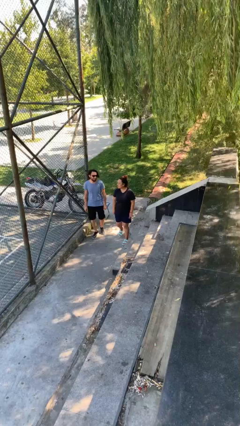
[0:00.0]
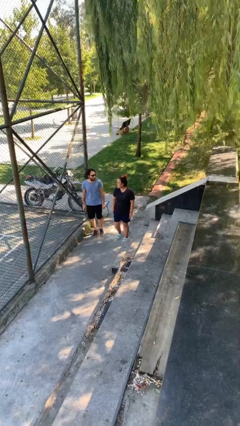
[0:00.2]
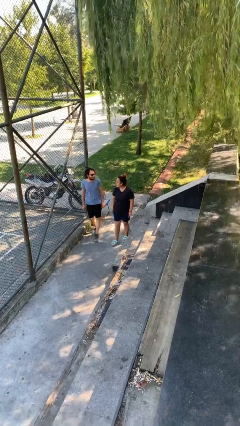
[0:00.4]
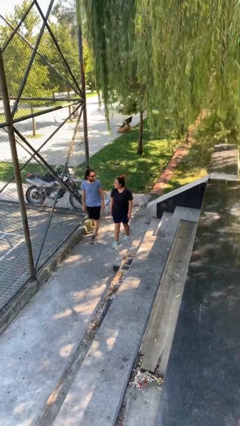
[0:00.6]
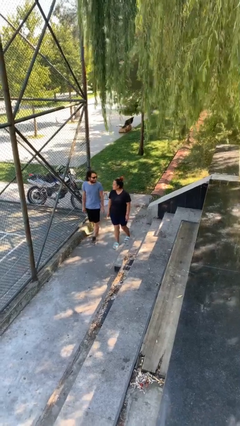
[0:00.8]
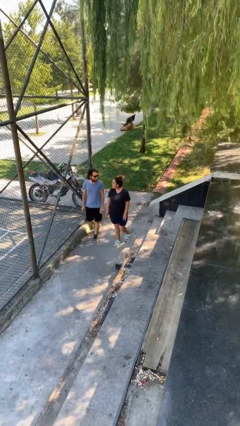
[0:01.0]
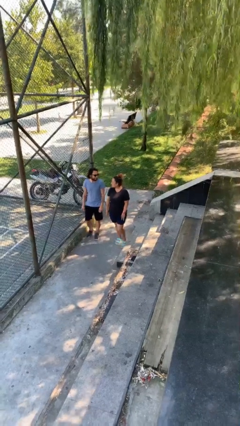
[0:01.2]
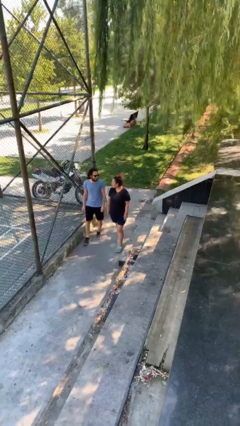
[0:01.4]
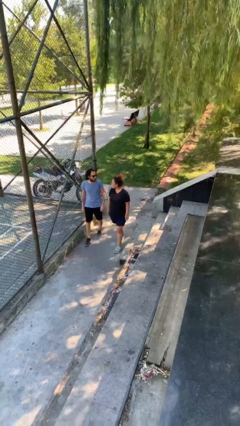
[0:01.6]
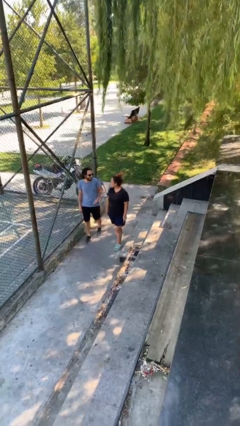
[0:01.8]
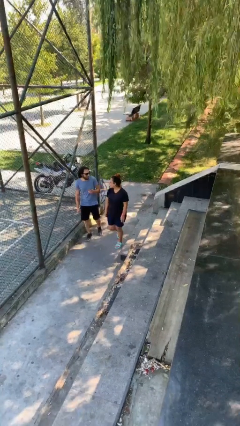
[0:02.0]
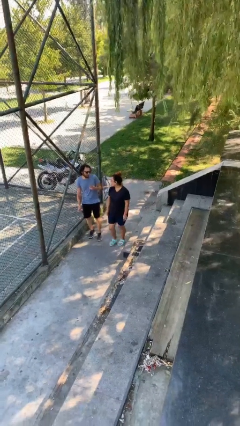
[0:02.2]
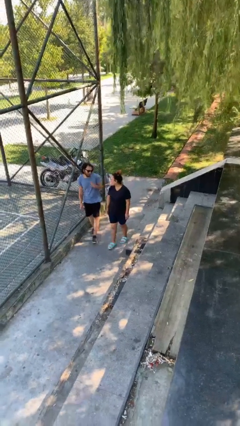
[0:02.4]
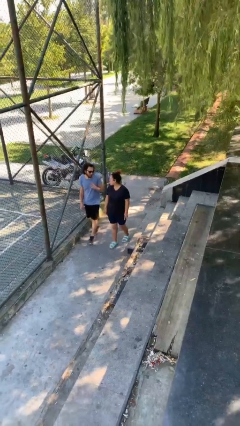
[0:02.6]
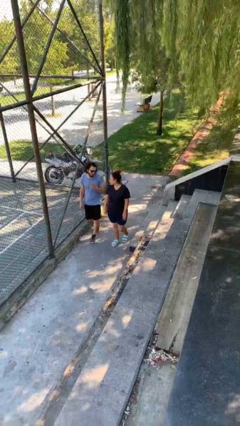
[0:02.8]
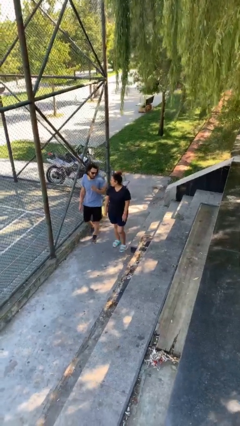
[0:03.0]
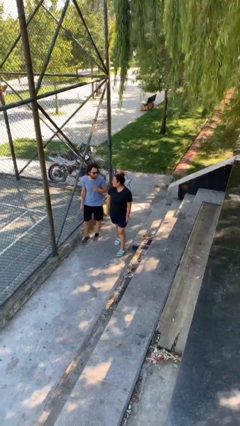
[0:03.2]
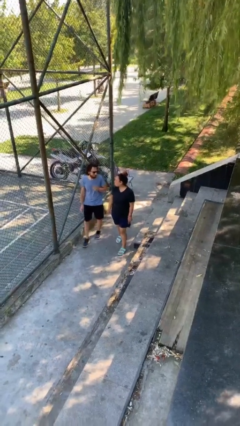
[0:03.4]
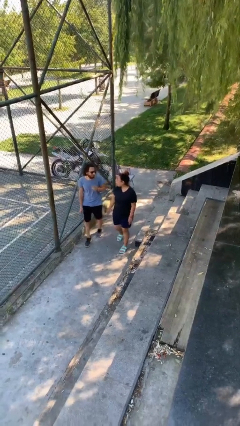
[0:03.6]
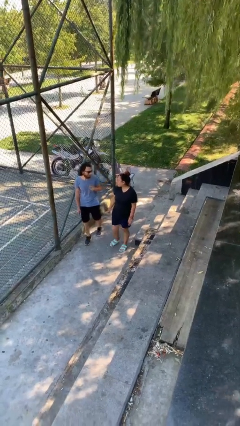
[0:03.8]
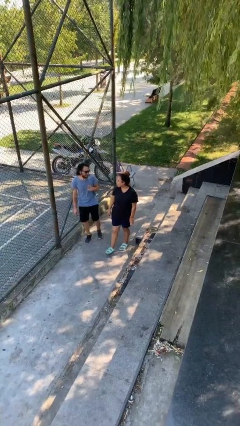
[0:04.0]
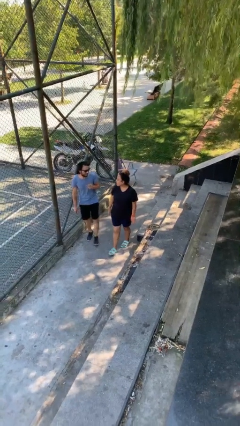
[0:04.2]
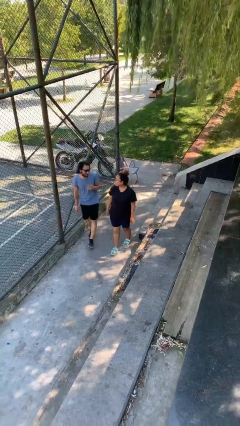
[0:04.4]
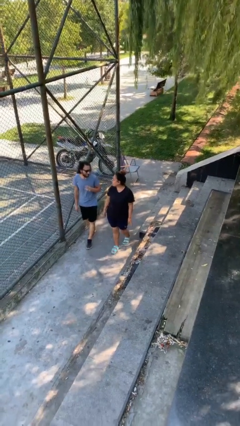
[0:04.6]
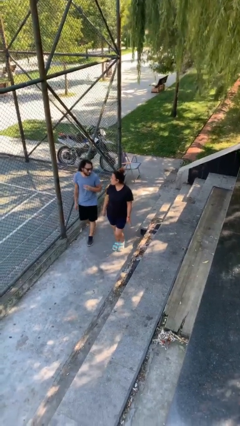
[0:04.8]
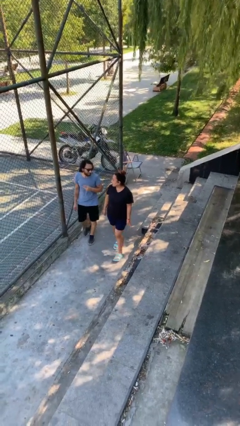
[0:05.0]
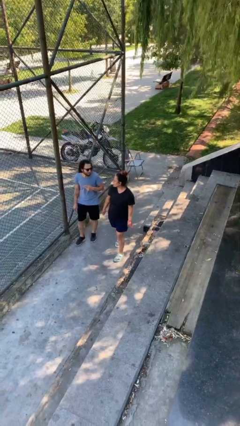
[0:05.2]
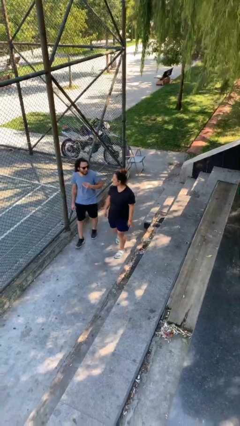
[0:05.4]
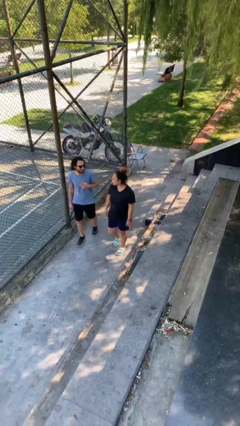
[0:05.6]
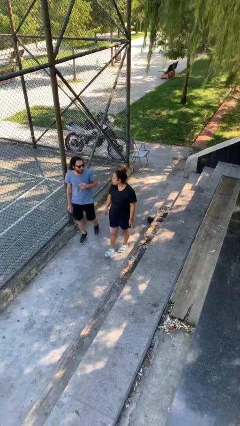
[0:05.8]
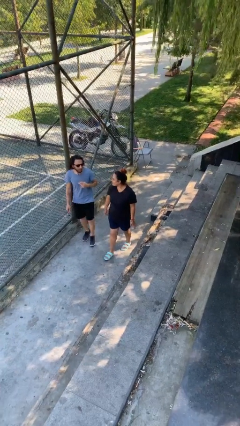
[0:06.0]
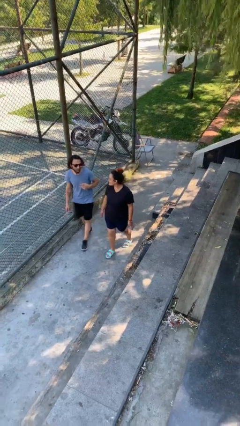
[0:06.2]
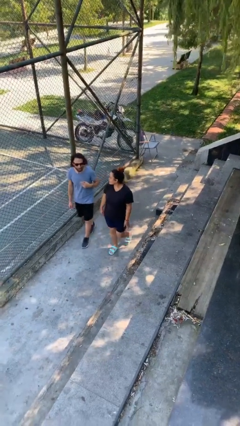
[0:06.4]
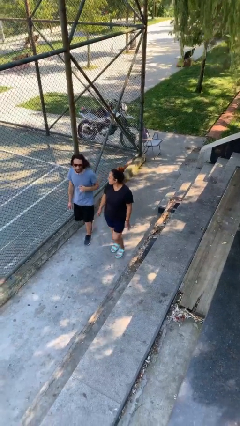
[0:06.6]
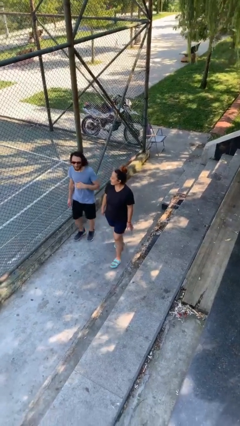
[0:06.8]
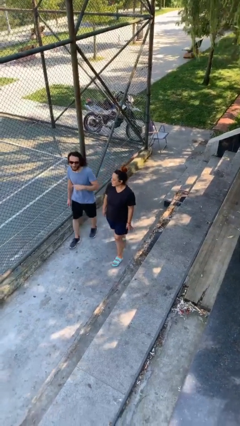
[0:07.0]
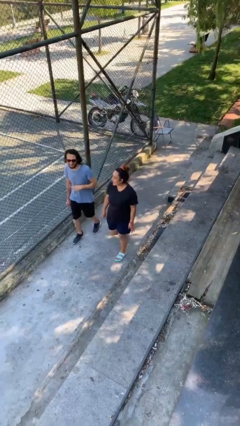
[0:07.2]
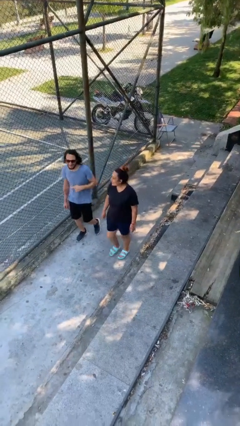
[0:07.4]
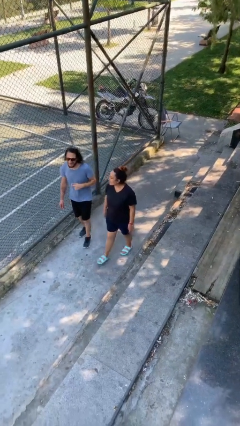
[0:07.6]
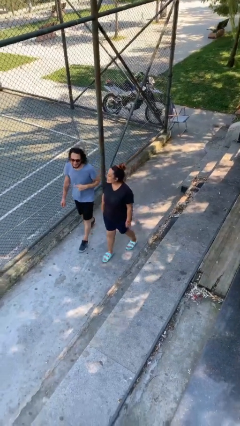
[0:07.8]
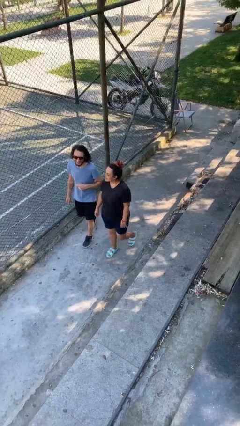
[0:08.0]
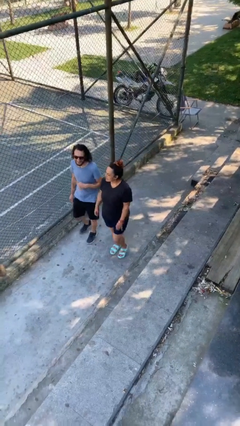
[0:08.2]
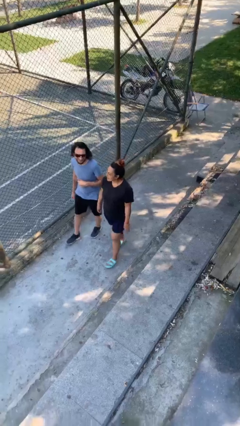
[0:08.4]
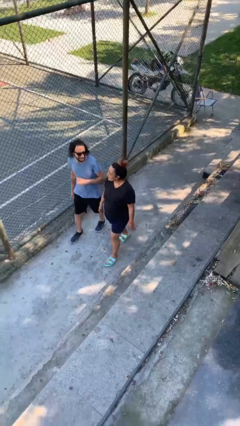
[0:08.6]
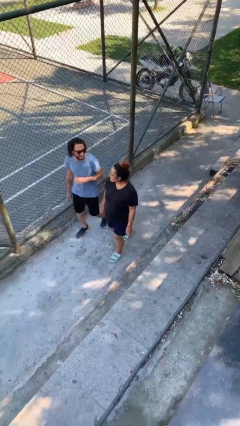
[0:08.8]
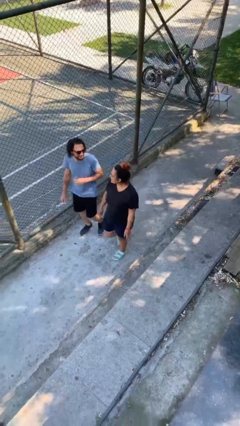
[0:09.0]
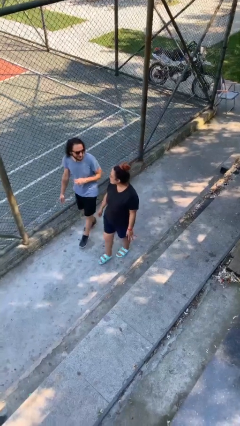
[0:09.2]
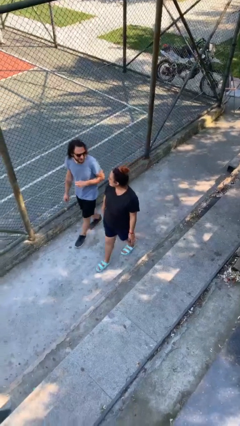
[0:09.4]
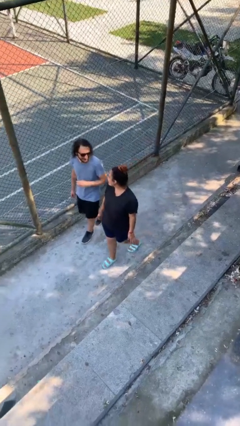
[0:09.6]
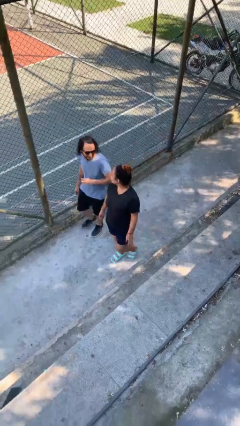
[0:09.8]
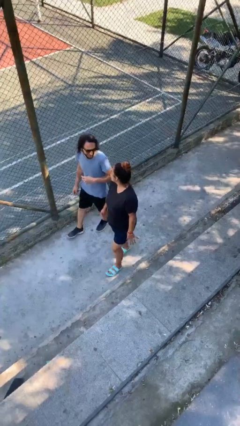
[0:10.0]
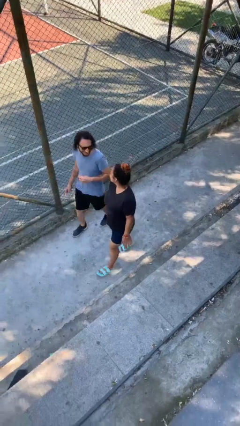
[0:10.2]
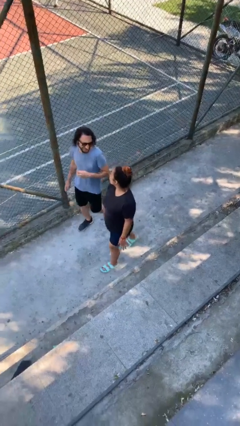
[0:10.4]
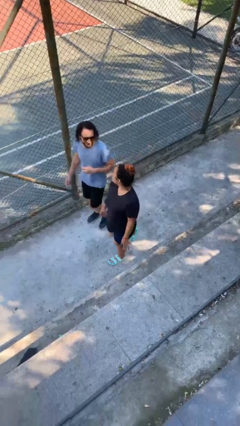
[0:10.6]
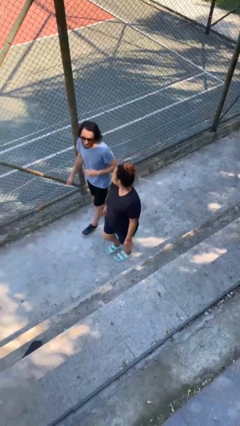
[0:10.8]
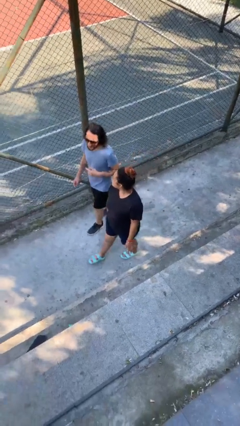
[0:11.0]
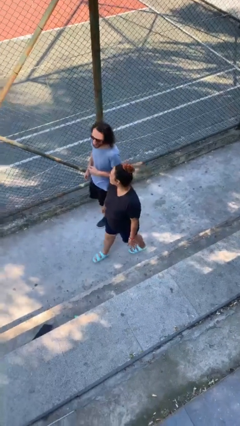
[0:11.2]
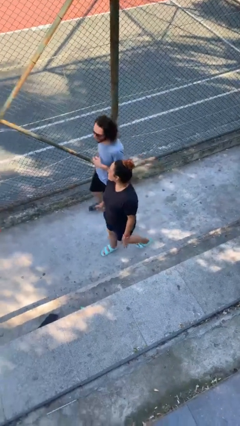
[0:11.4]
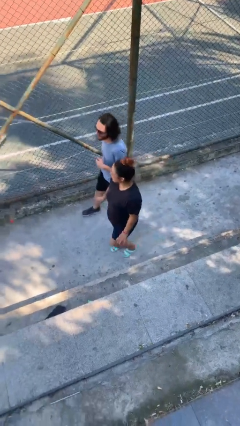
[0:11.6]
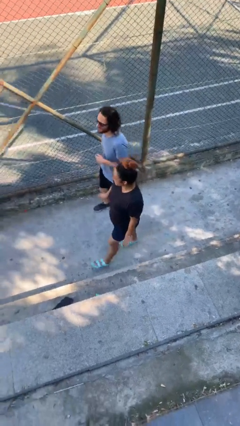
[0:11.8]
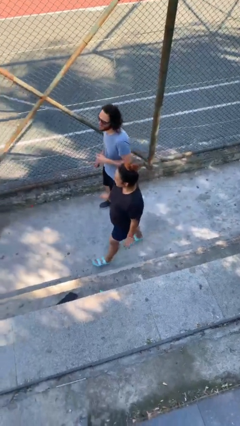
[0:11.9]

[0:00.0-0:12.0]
person talks to person

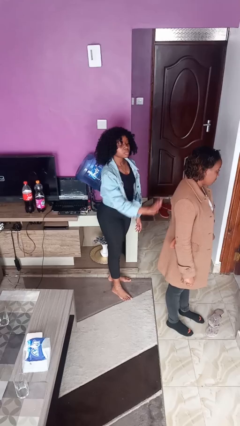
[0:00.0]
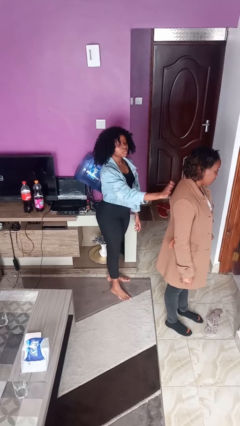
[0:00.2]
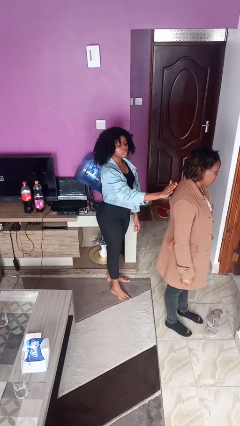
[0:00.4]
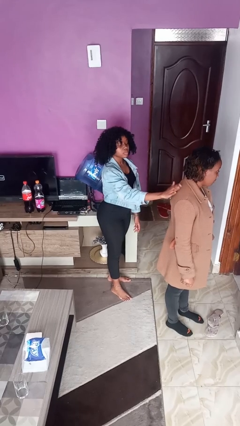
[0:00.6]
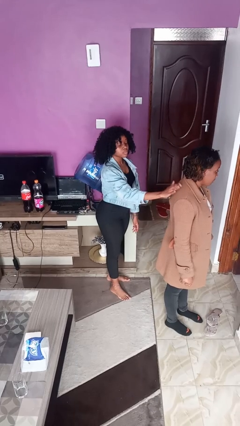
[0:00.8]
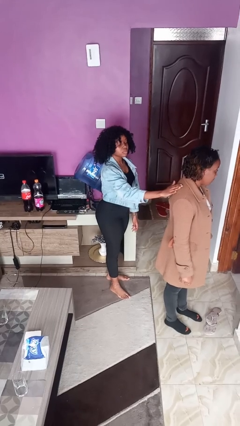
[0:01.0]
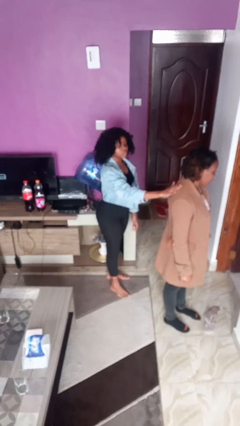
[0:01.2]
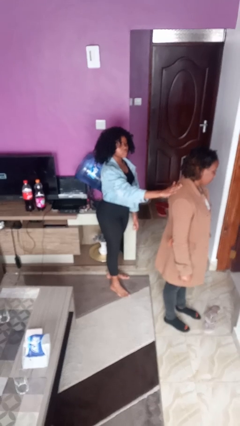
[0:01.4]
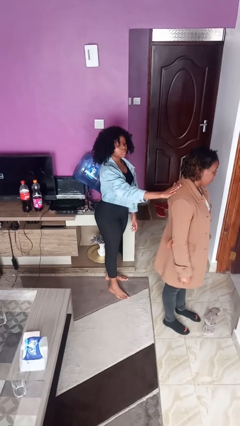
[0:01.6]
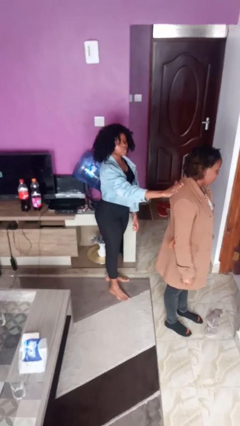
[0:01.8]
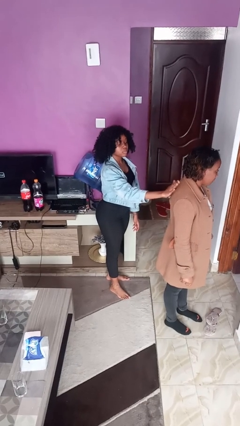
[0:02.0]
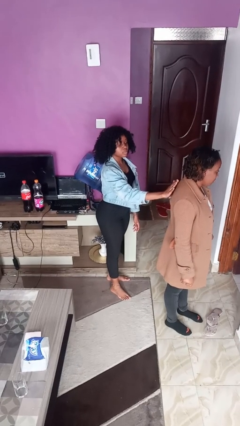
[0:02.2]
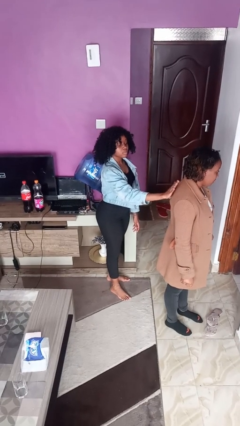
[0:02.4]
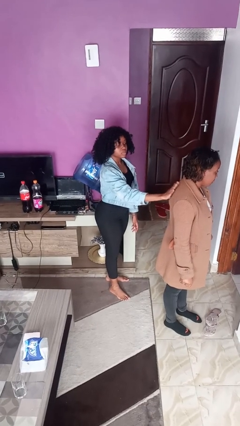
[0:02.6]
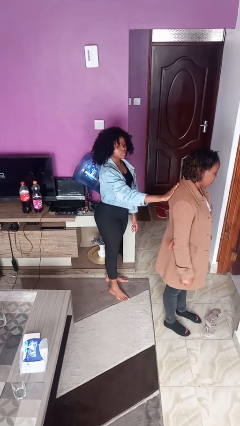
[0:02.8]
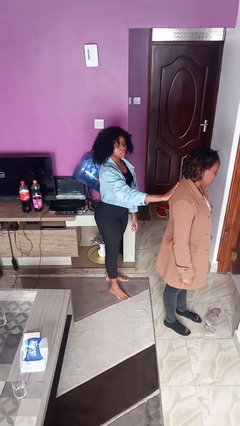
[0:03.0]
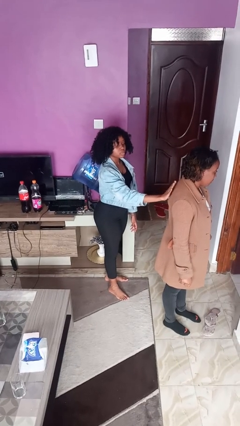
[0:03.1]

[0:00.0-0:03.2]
person touches back of person

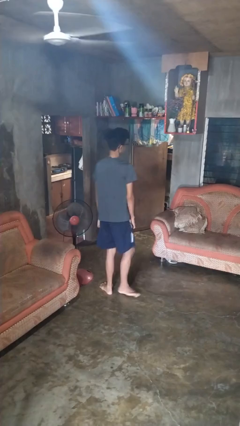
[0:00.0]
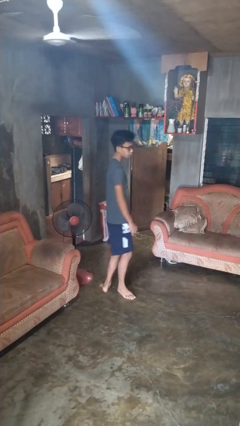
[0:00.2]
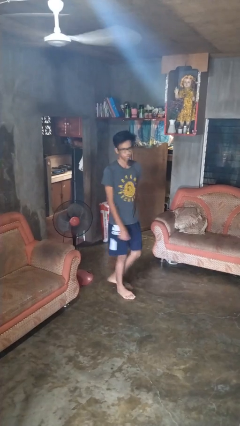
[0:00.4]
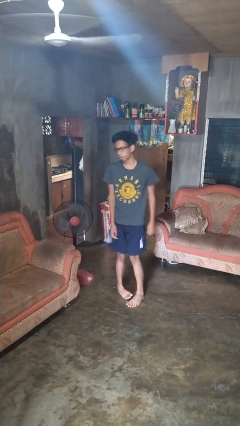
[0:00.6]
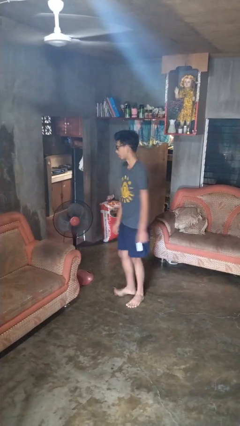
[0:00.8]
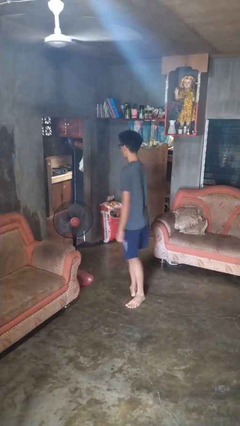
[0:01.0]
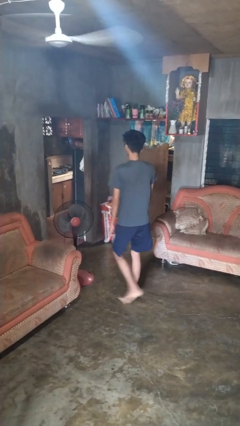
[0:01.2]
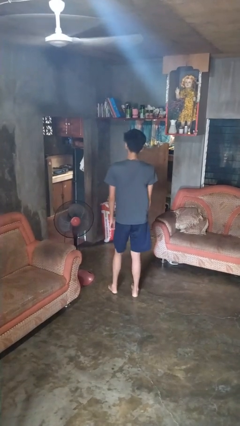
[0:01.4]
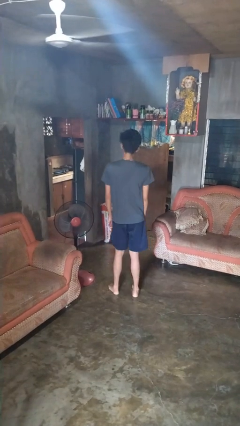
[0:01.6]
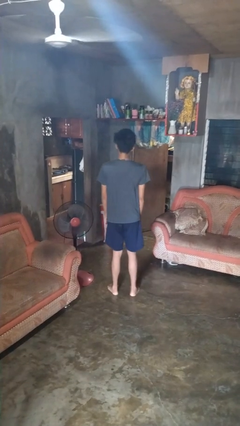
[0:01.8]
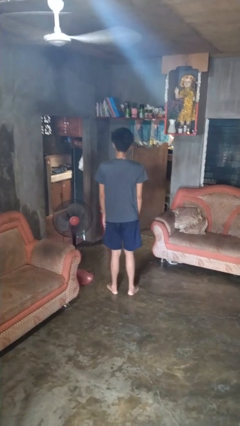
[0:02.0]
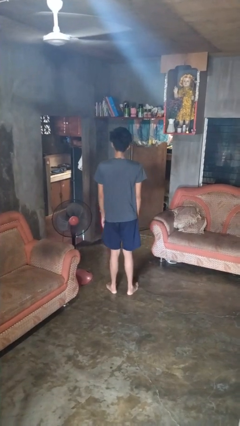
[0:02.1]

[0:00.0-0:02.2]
person twirls

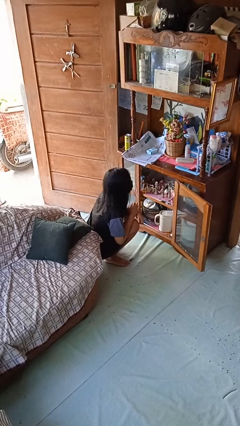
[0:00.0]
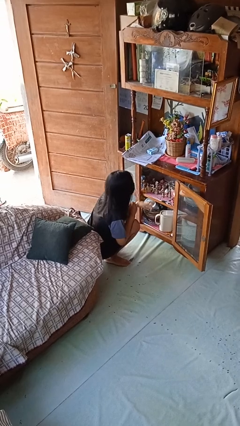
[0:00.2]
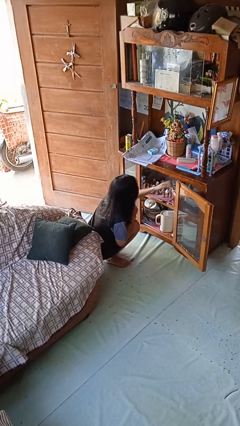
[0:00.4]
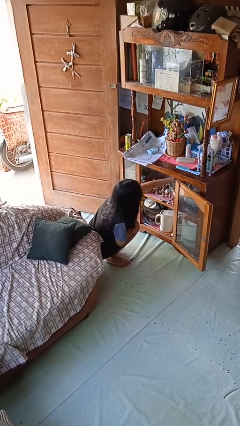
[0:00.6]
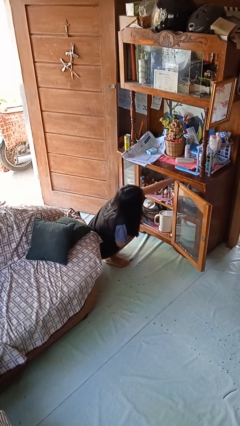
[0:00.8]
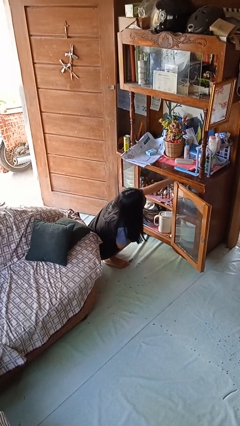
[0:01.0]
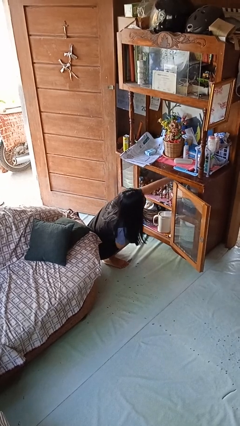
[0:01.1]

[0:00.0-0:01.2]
person searches in cabinet
